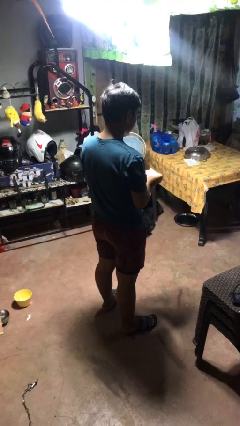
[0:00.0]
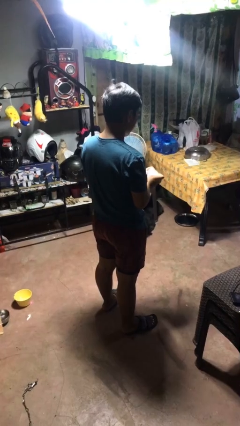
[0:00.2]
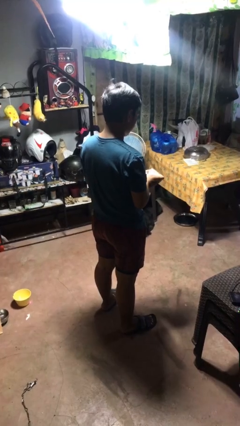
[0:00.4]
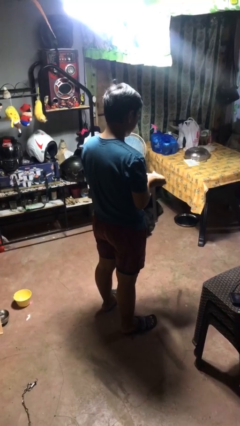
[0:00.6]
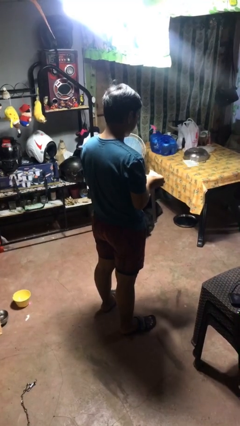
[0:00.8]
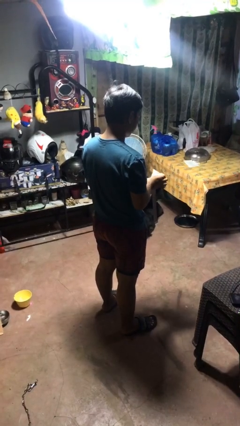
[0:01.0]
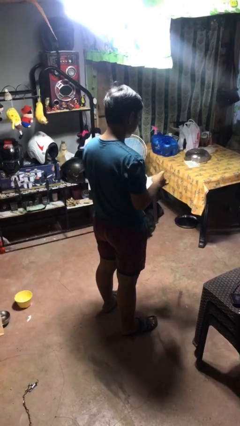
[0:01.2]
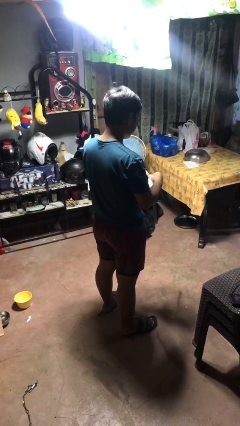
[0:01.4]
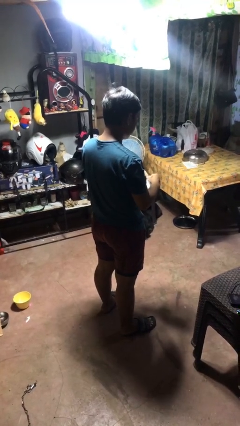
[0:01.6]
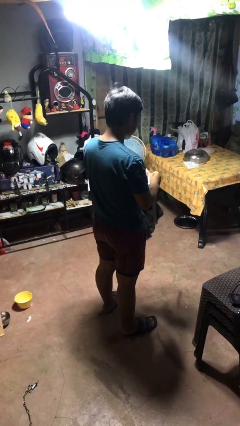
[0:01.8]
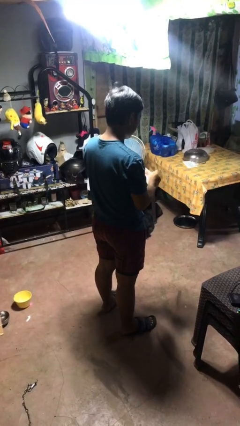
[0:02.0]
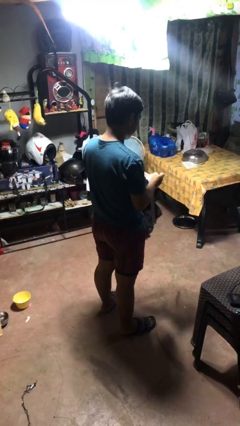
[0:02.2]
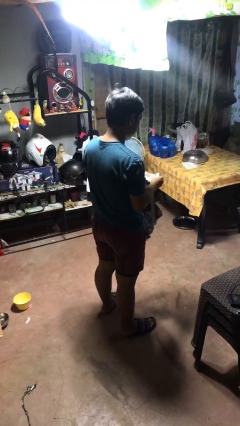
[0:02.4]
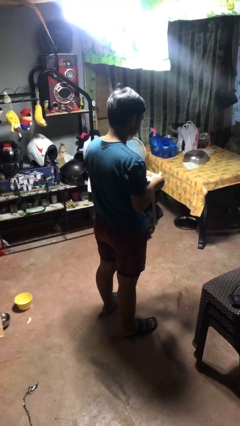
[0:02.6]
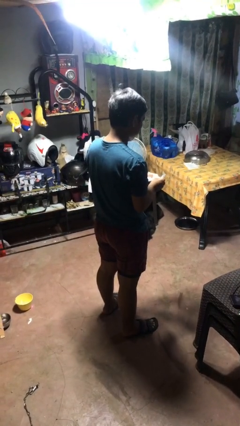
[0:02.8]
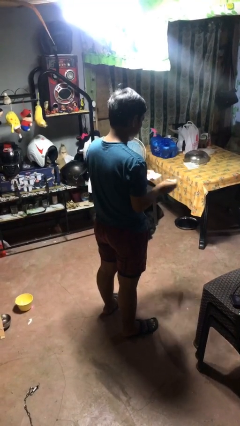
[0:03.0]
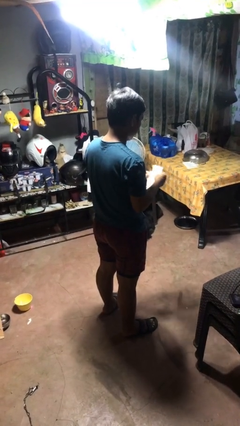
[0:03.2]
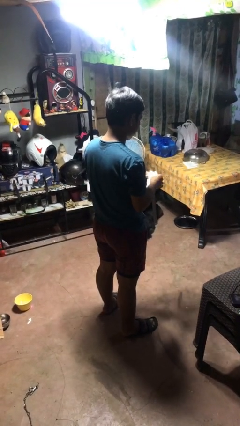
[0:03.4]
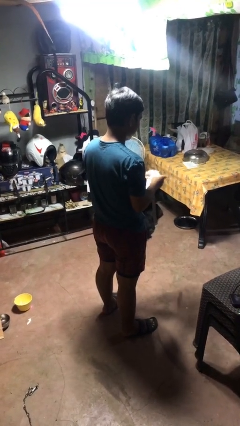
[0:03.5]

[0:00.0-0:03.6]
person tears paper

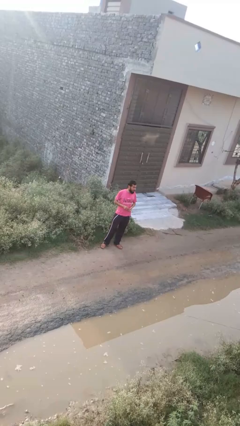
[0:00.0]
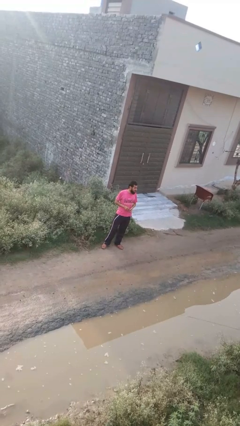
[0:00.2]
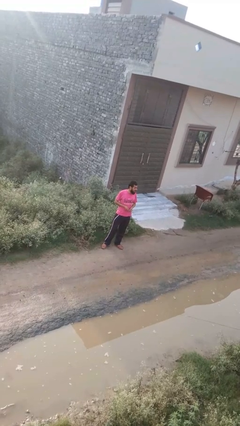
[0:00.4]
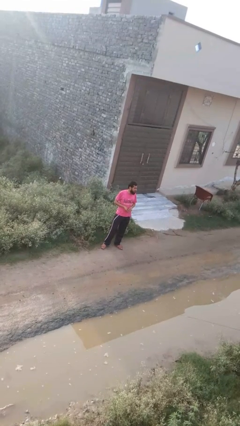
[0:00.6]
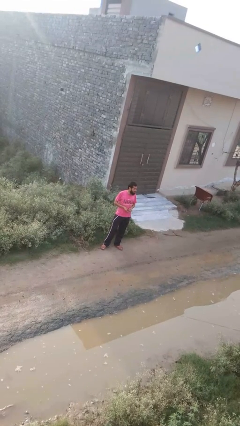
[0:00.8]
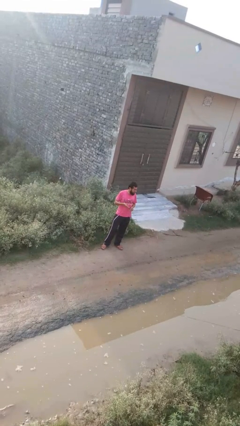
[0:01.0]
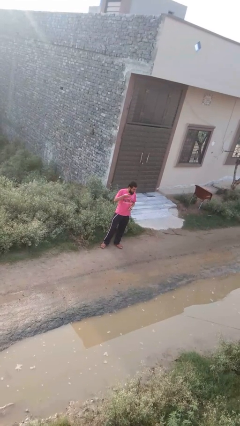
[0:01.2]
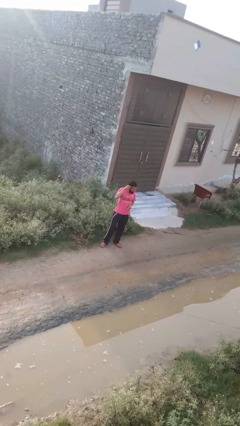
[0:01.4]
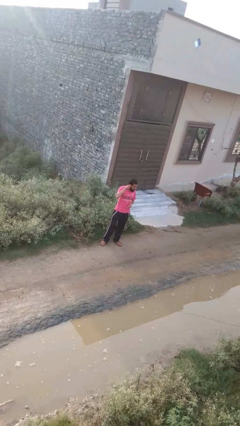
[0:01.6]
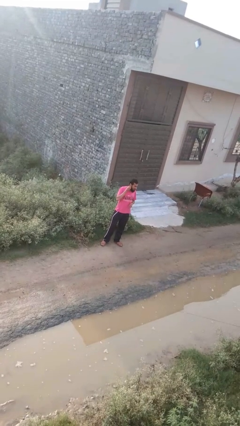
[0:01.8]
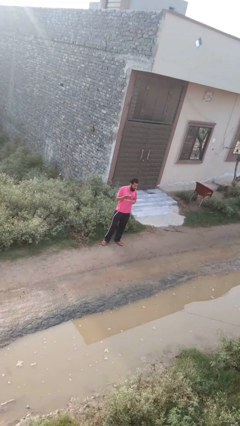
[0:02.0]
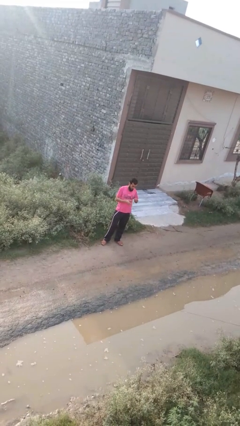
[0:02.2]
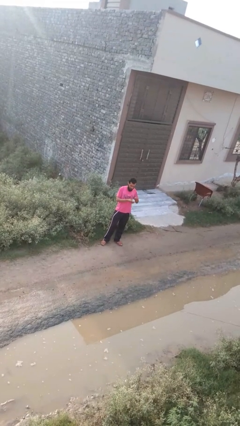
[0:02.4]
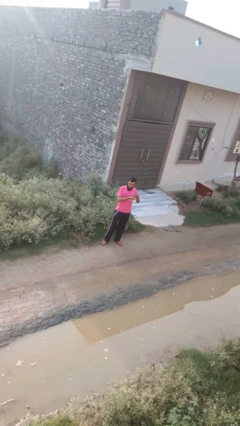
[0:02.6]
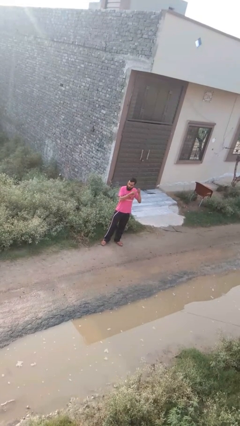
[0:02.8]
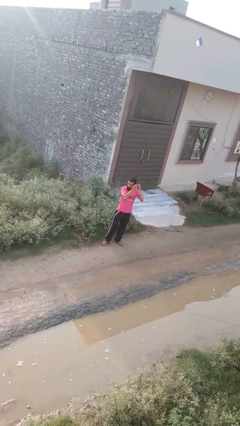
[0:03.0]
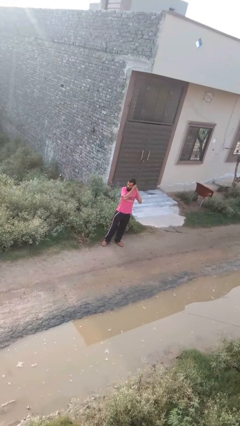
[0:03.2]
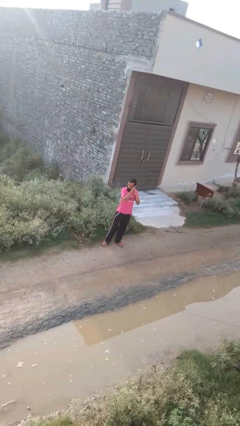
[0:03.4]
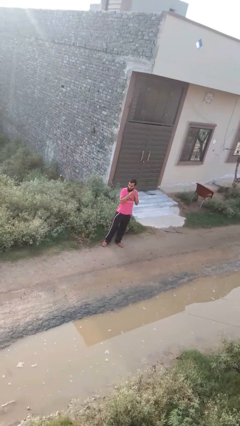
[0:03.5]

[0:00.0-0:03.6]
person puts on earrings

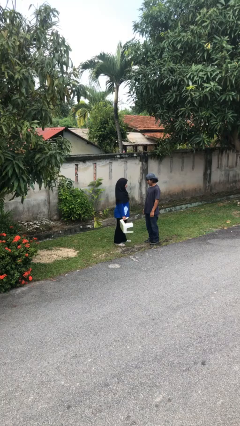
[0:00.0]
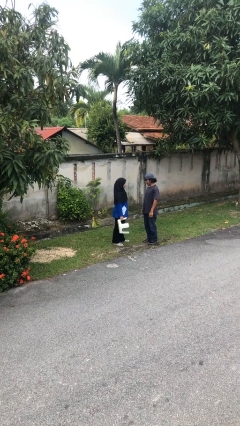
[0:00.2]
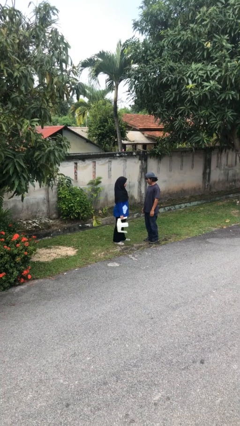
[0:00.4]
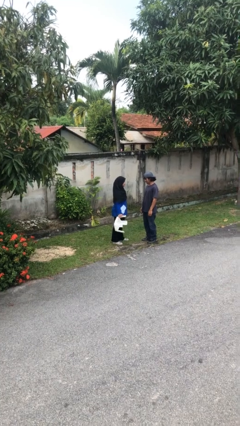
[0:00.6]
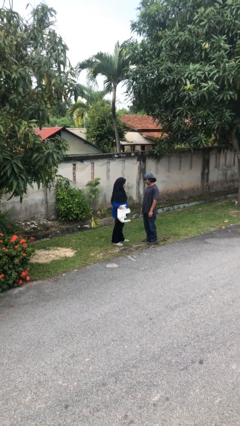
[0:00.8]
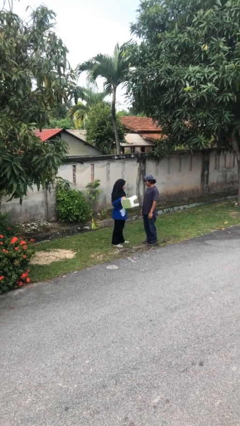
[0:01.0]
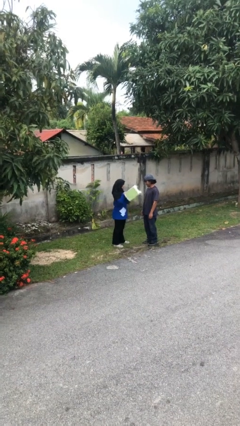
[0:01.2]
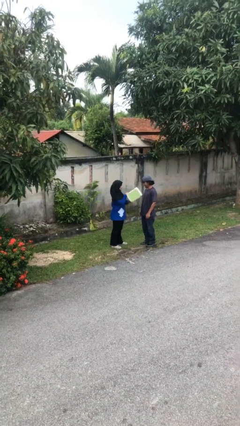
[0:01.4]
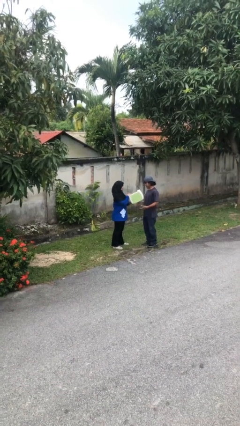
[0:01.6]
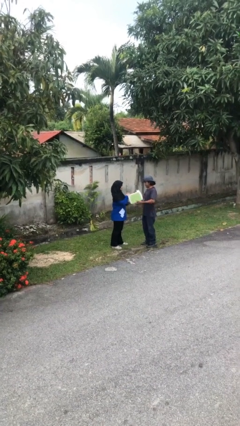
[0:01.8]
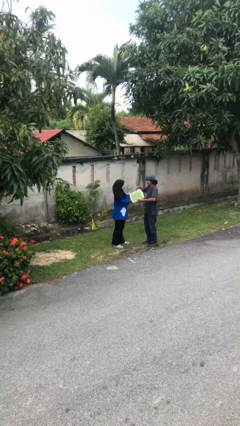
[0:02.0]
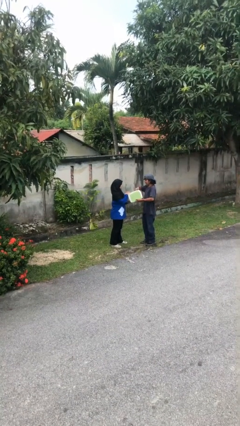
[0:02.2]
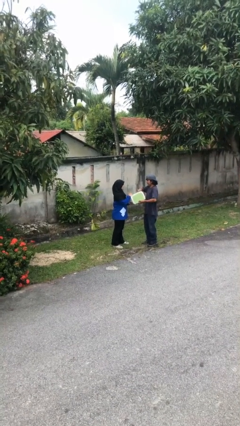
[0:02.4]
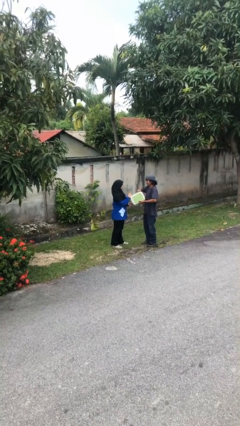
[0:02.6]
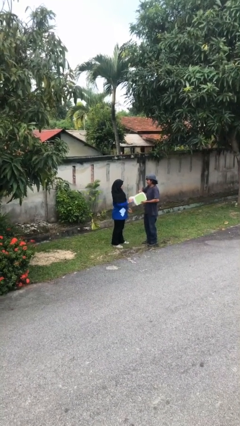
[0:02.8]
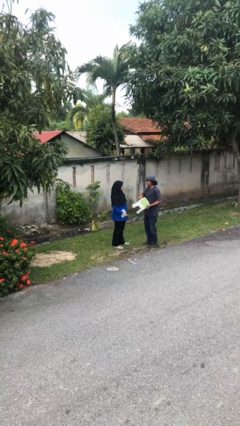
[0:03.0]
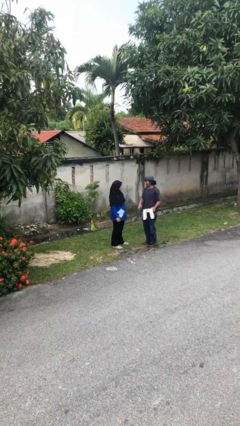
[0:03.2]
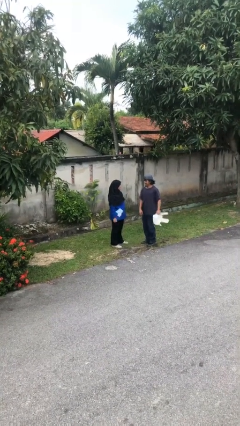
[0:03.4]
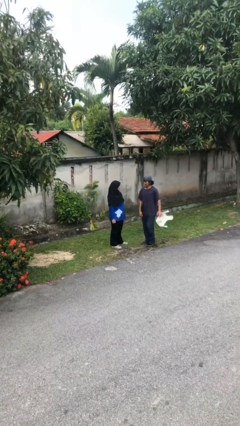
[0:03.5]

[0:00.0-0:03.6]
person transfers object to person

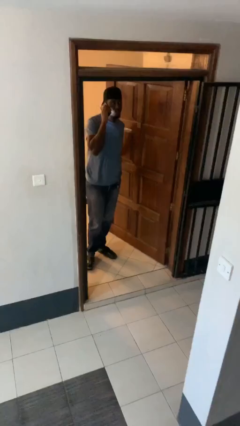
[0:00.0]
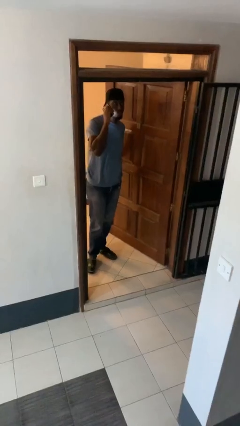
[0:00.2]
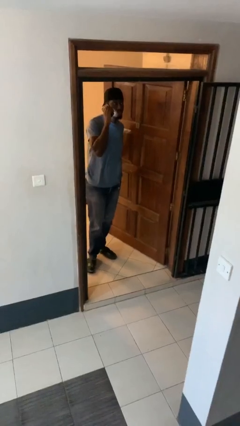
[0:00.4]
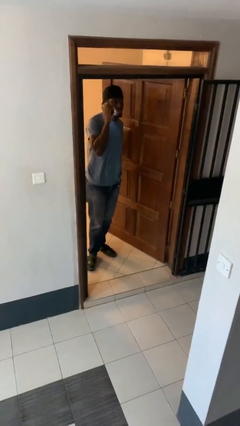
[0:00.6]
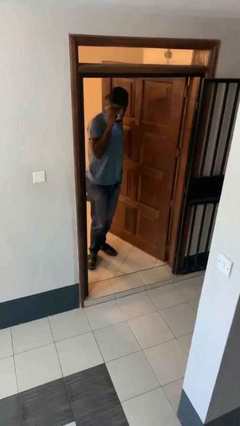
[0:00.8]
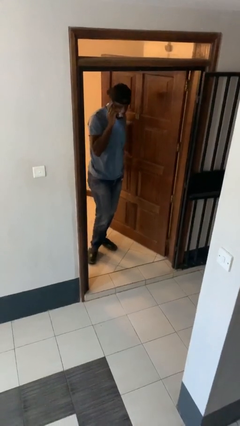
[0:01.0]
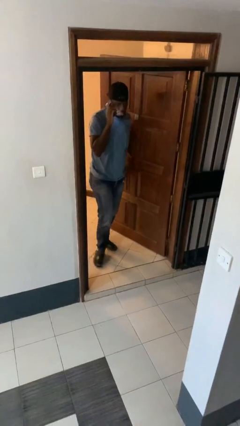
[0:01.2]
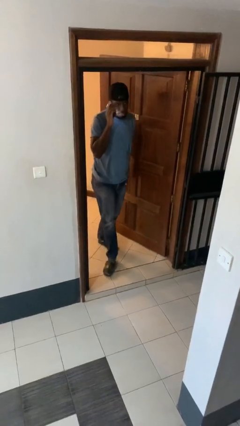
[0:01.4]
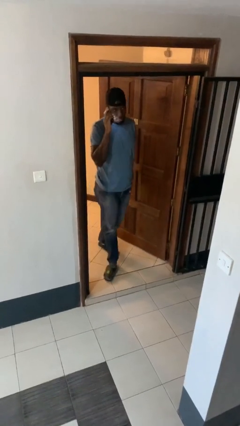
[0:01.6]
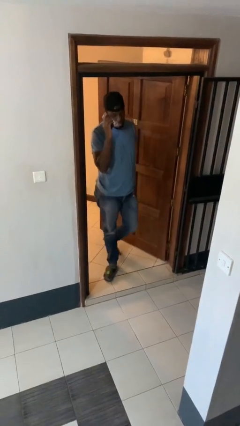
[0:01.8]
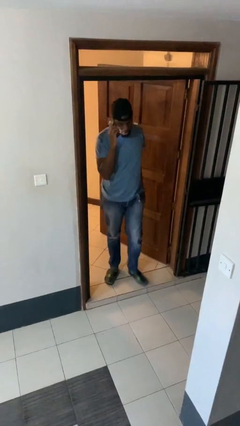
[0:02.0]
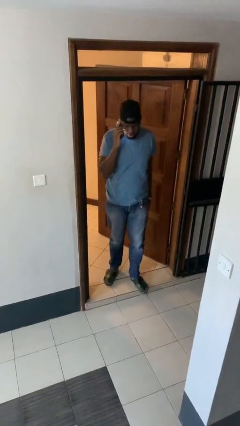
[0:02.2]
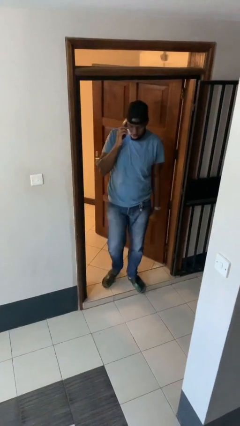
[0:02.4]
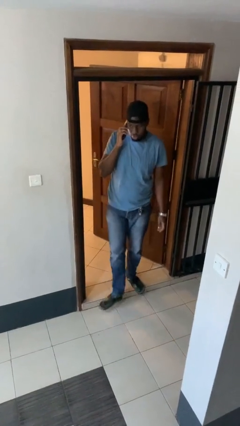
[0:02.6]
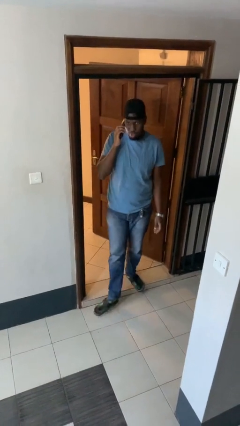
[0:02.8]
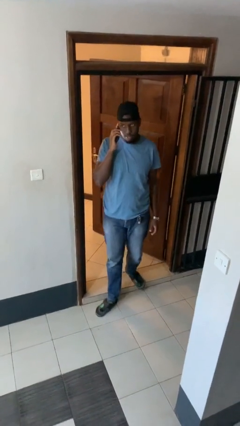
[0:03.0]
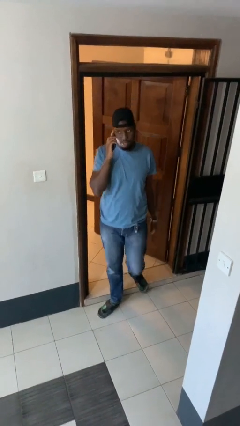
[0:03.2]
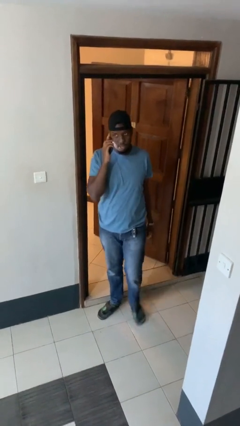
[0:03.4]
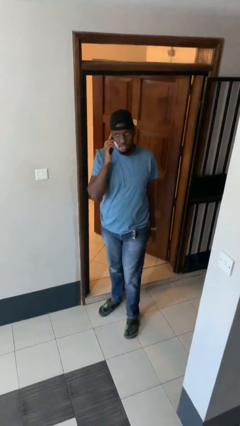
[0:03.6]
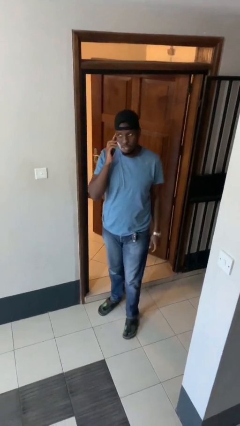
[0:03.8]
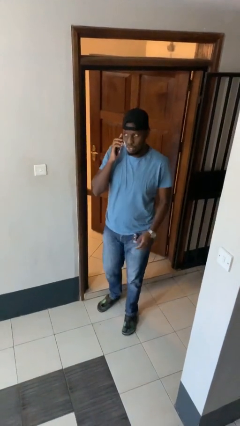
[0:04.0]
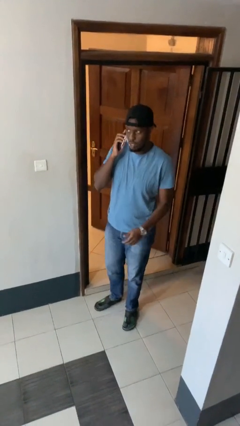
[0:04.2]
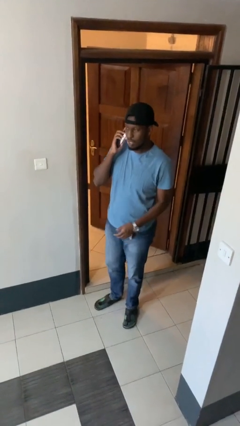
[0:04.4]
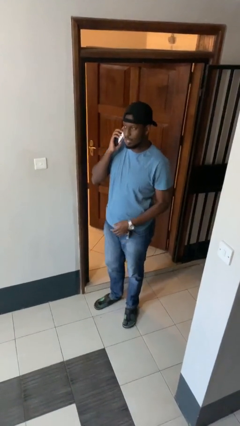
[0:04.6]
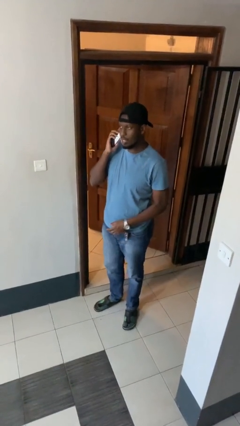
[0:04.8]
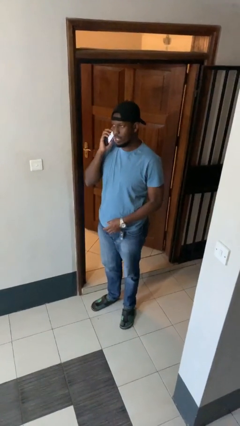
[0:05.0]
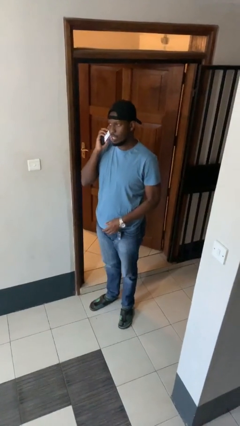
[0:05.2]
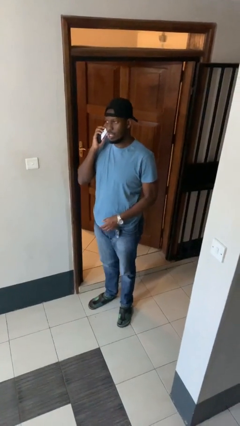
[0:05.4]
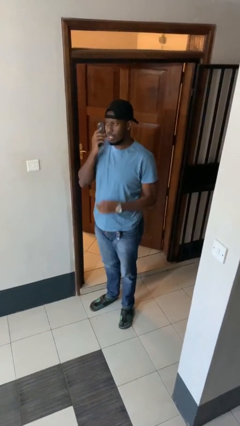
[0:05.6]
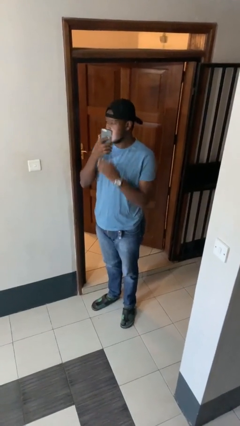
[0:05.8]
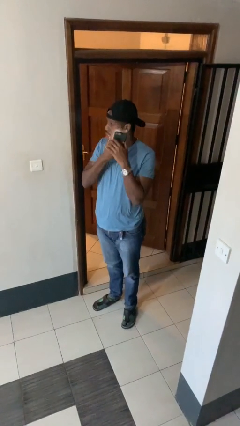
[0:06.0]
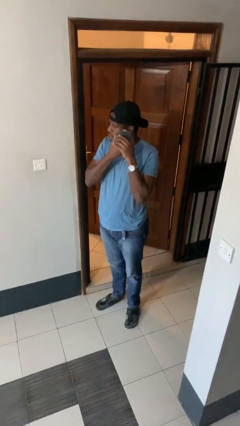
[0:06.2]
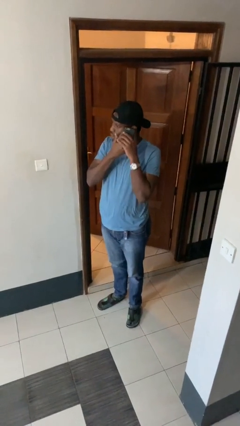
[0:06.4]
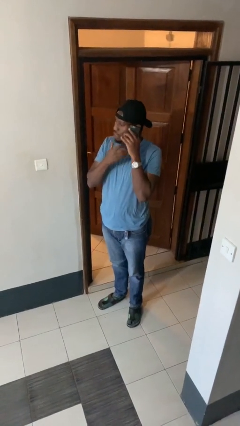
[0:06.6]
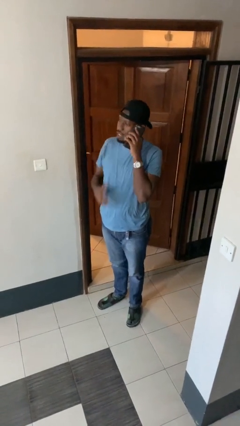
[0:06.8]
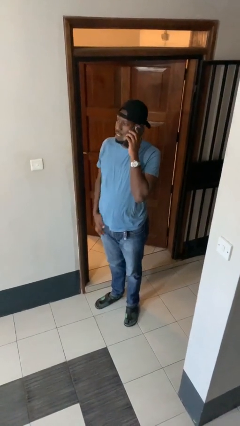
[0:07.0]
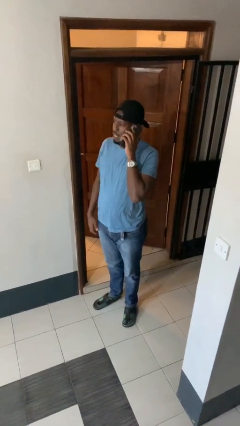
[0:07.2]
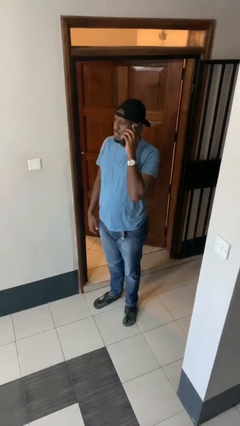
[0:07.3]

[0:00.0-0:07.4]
person enters scene through structure
